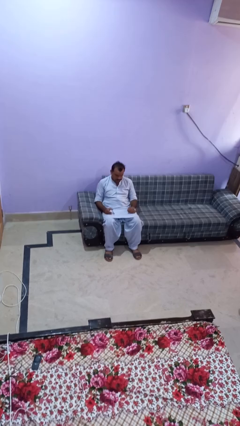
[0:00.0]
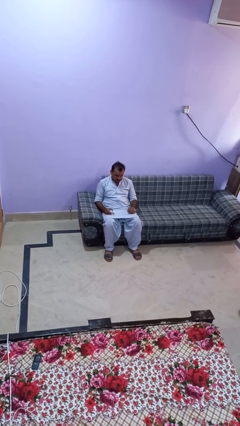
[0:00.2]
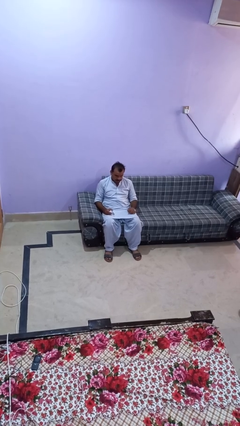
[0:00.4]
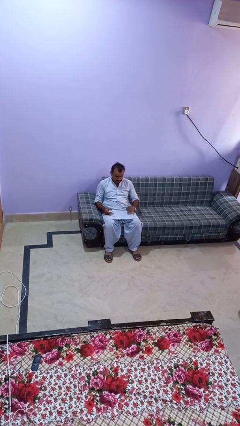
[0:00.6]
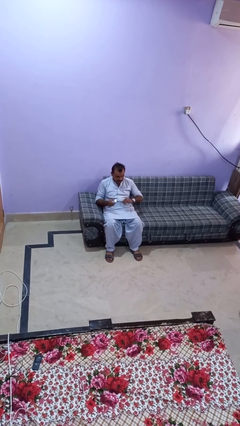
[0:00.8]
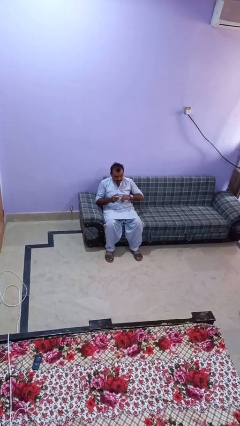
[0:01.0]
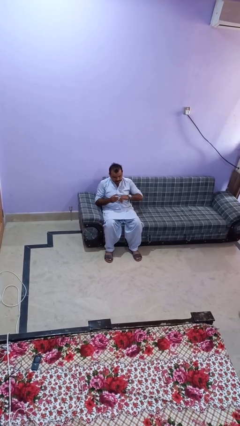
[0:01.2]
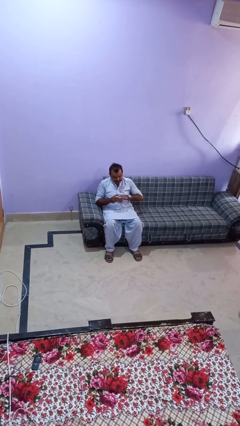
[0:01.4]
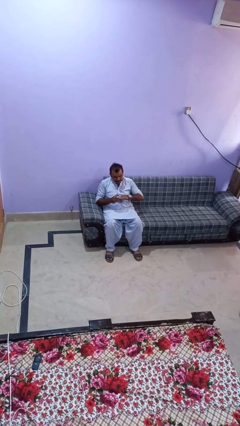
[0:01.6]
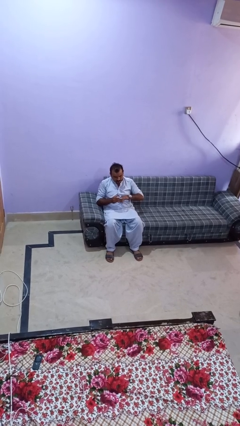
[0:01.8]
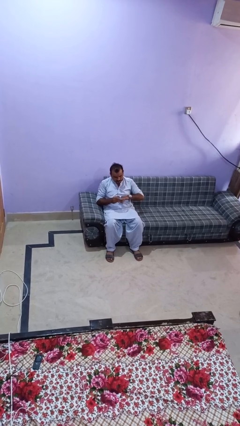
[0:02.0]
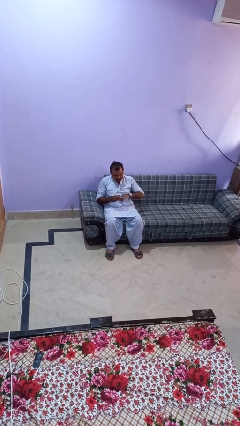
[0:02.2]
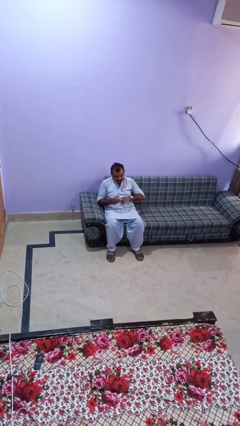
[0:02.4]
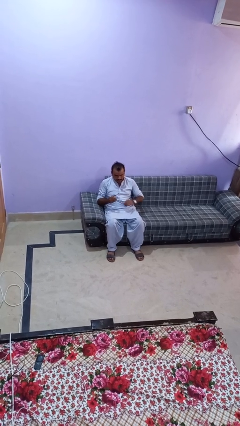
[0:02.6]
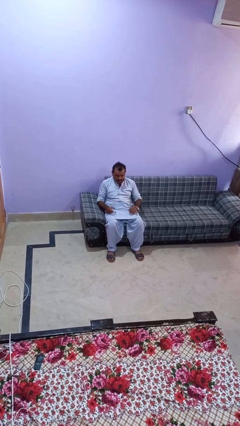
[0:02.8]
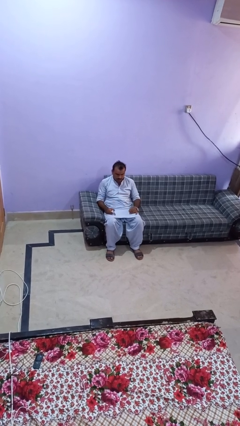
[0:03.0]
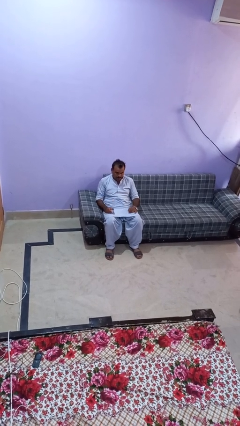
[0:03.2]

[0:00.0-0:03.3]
person clips fingernails

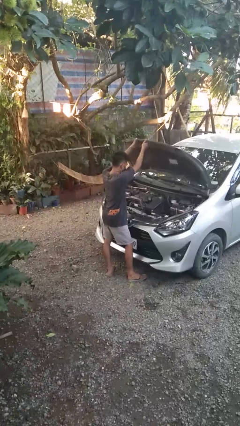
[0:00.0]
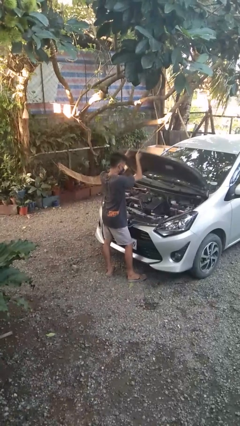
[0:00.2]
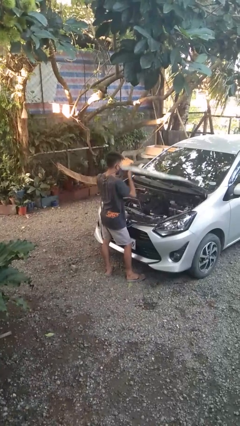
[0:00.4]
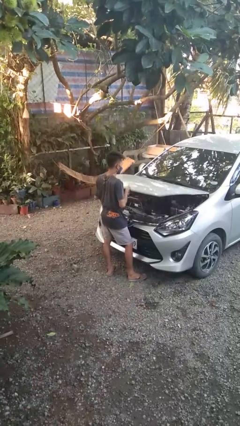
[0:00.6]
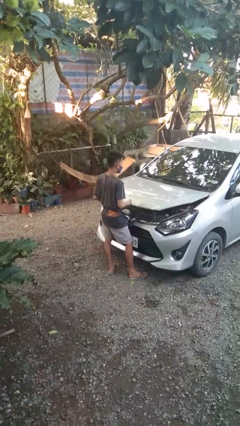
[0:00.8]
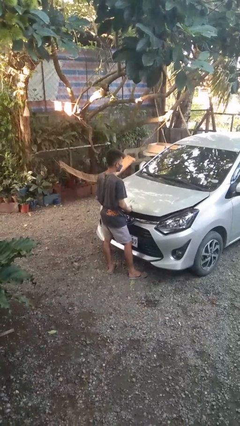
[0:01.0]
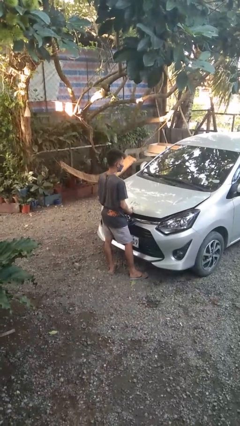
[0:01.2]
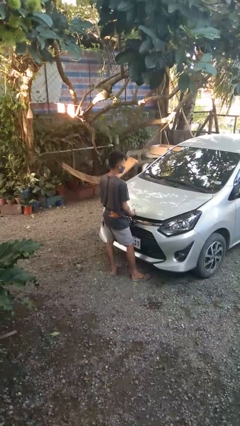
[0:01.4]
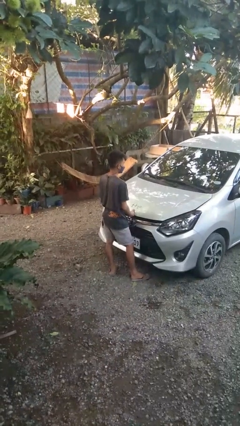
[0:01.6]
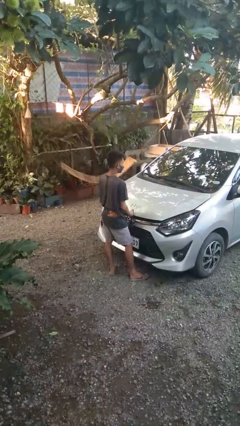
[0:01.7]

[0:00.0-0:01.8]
person closes car hood

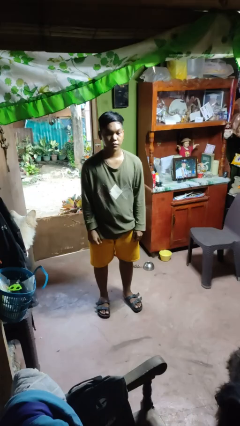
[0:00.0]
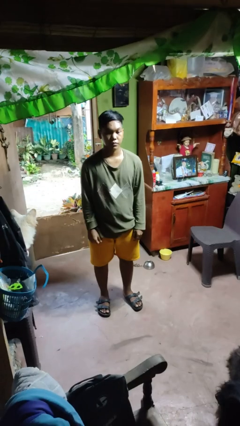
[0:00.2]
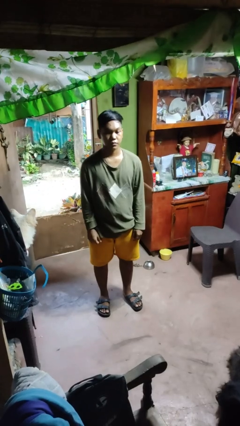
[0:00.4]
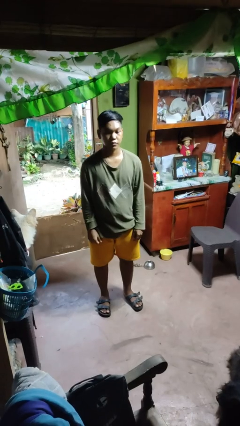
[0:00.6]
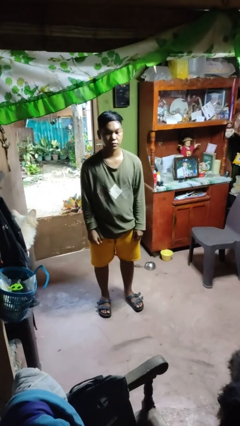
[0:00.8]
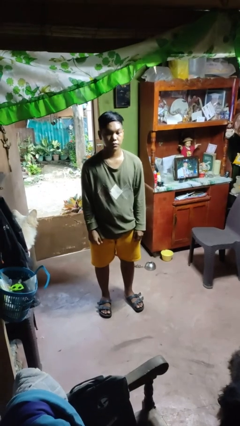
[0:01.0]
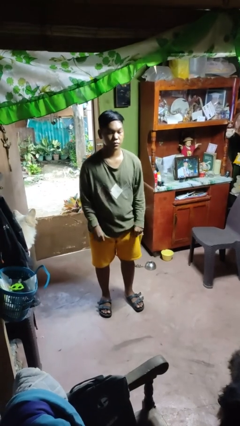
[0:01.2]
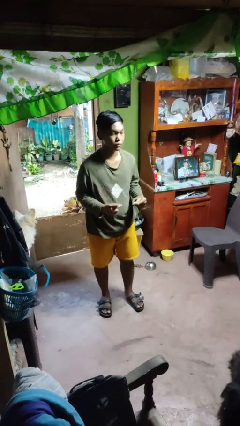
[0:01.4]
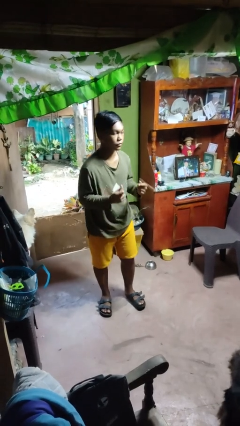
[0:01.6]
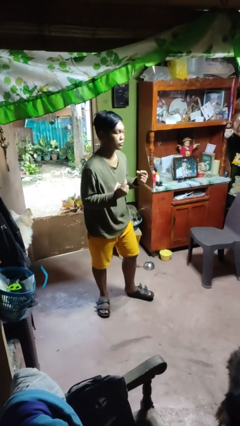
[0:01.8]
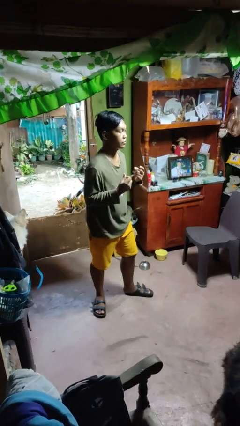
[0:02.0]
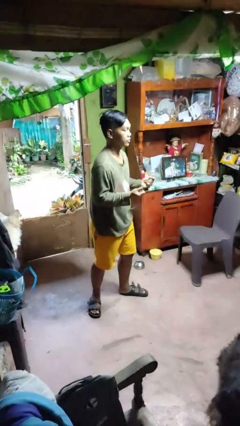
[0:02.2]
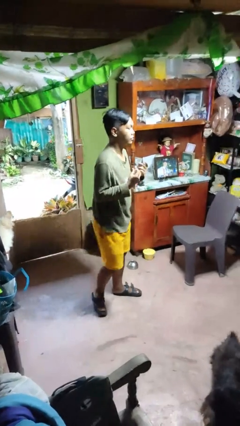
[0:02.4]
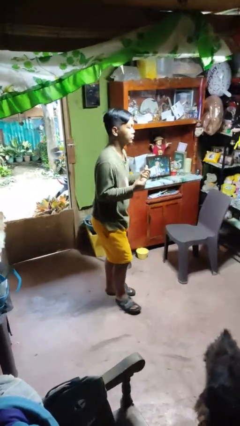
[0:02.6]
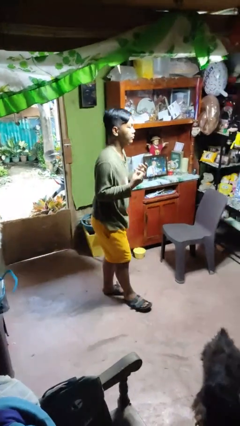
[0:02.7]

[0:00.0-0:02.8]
person snaps fingers

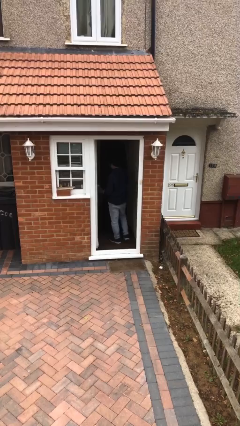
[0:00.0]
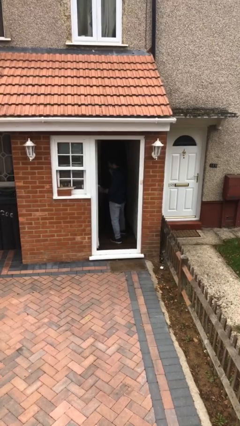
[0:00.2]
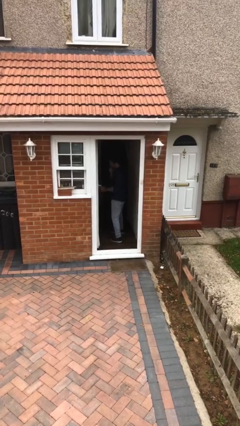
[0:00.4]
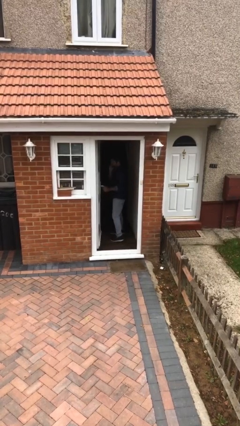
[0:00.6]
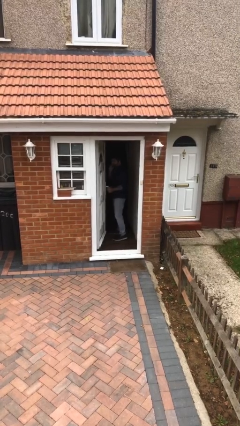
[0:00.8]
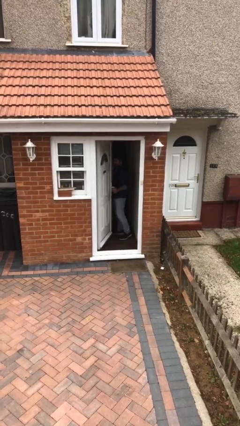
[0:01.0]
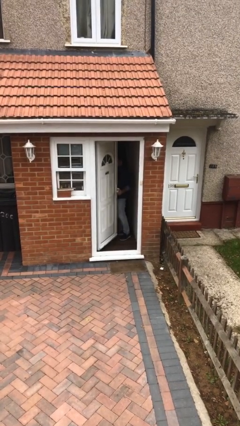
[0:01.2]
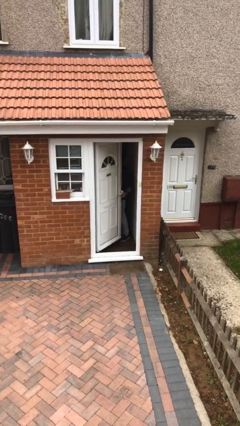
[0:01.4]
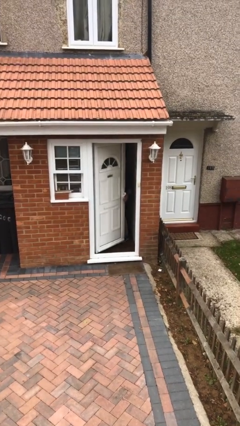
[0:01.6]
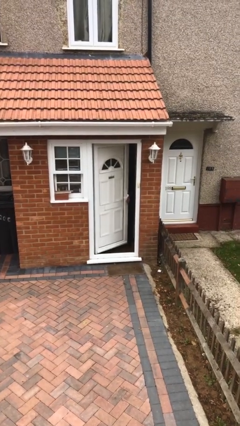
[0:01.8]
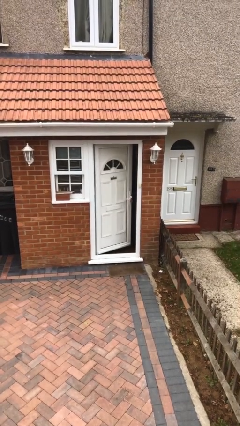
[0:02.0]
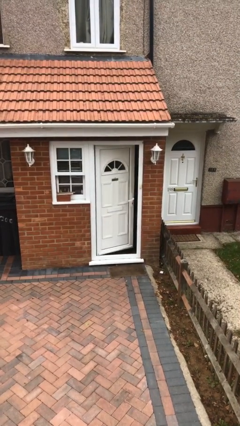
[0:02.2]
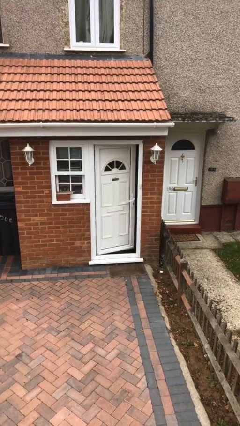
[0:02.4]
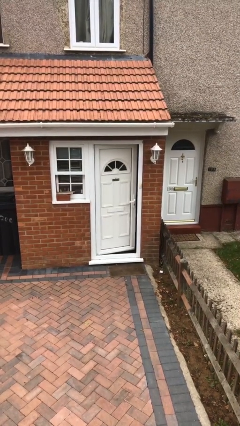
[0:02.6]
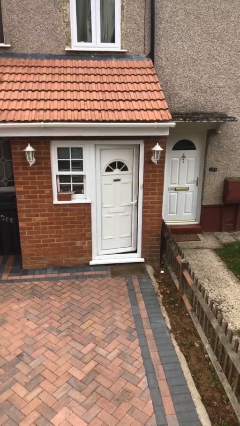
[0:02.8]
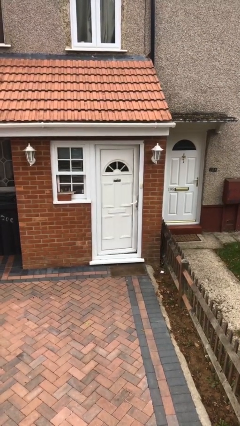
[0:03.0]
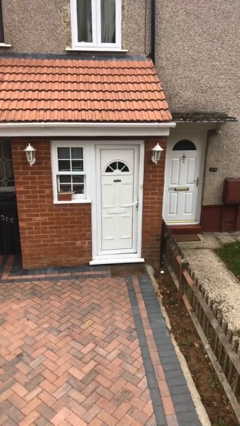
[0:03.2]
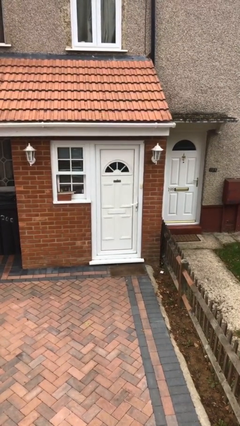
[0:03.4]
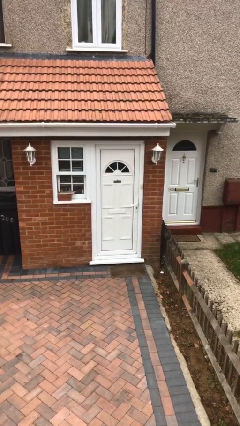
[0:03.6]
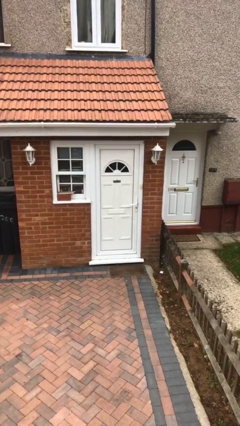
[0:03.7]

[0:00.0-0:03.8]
person closes facility door

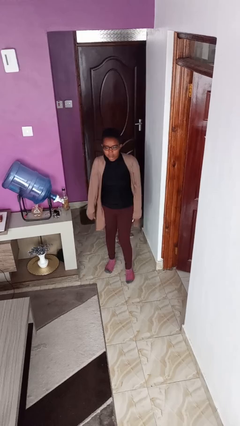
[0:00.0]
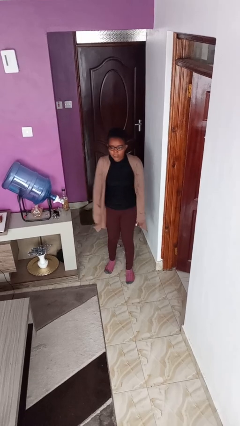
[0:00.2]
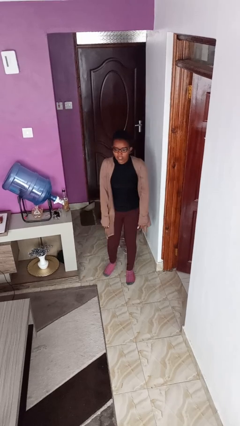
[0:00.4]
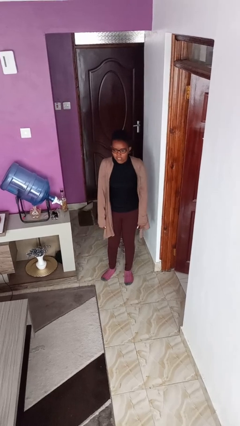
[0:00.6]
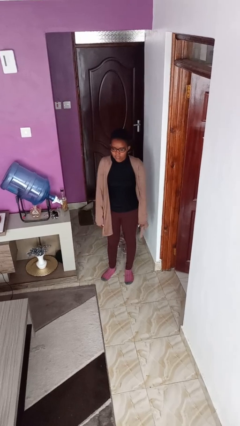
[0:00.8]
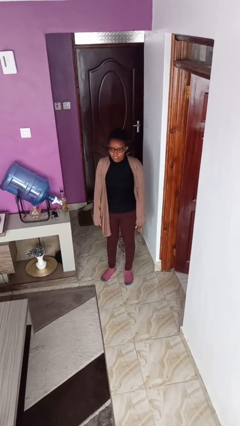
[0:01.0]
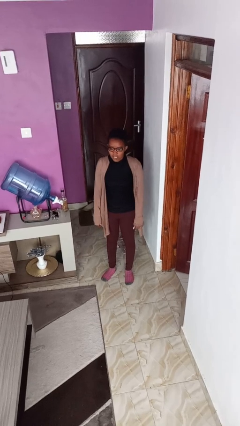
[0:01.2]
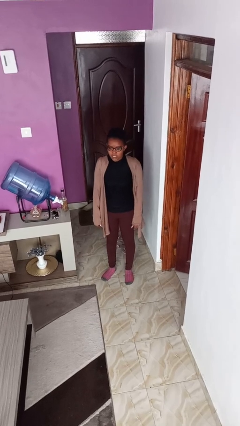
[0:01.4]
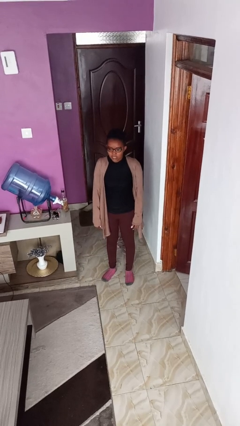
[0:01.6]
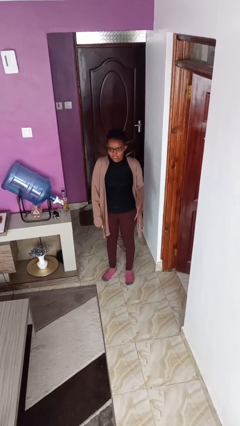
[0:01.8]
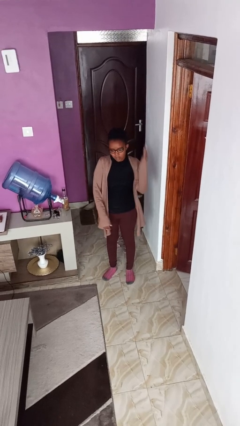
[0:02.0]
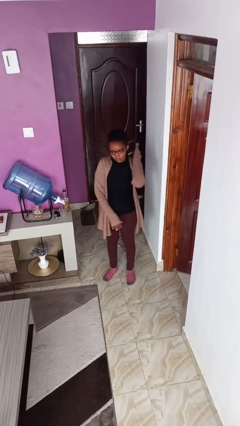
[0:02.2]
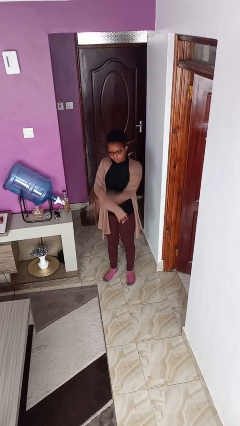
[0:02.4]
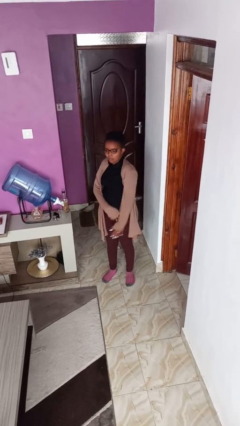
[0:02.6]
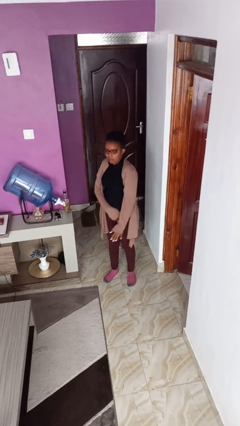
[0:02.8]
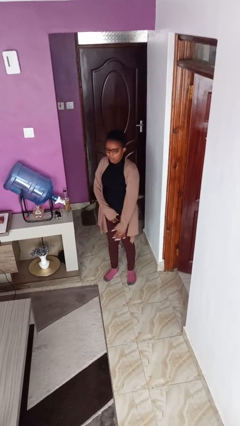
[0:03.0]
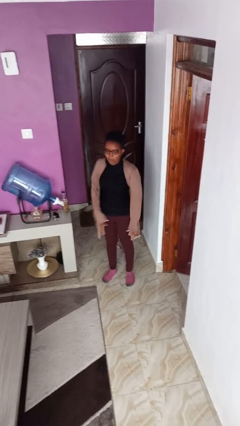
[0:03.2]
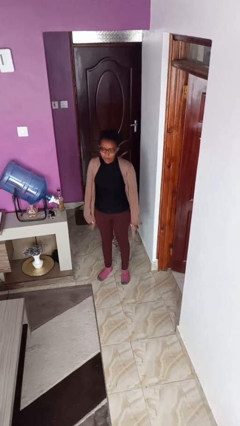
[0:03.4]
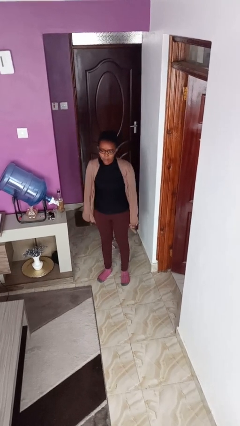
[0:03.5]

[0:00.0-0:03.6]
person karate chop

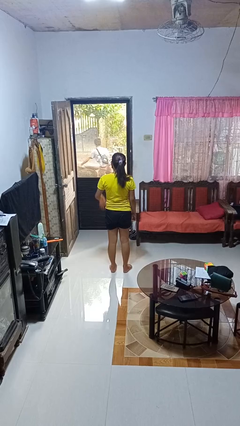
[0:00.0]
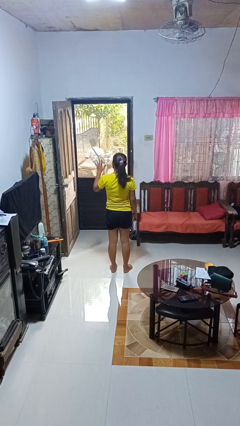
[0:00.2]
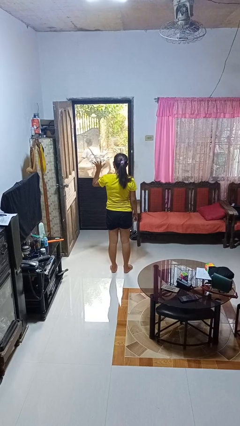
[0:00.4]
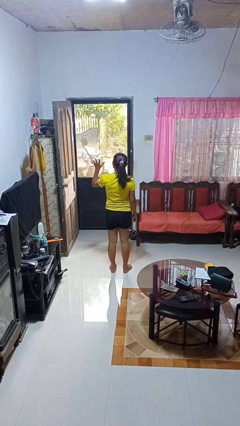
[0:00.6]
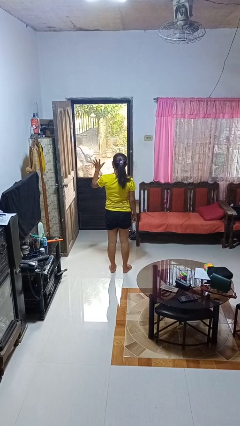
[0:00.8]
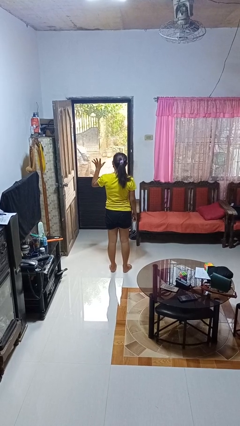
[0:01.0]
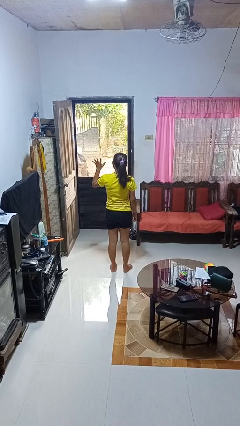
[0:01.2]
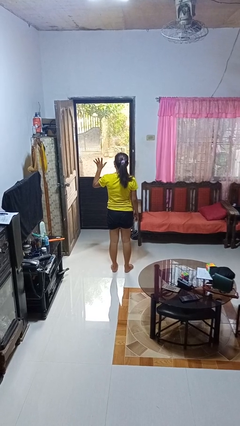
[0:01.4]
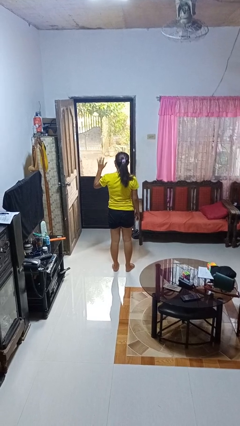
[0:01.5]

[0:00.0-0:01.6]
person gestures number five

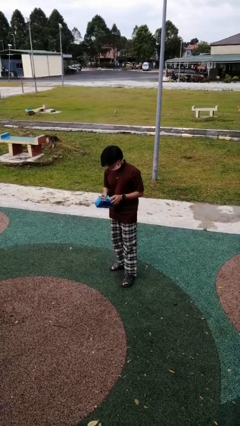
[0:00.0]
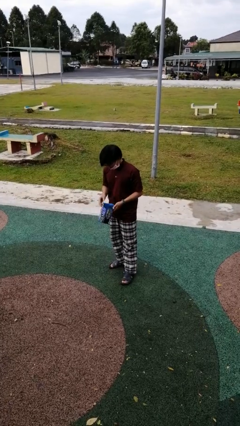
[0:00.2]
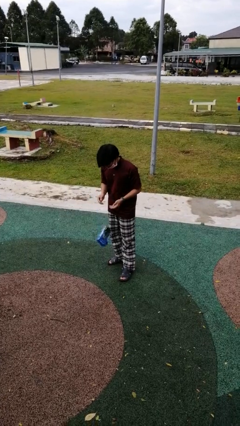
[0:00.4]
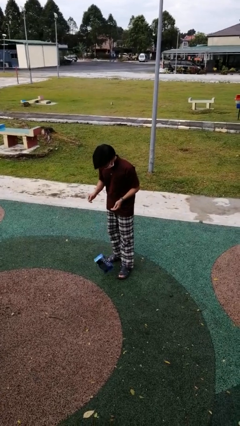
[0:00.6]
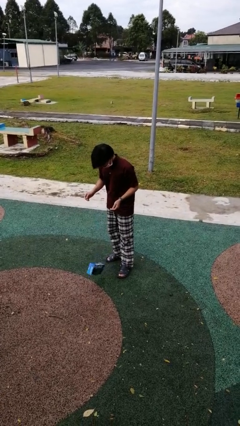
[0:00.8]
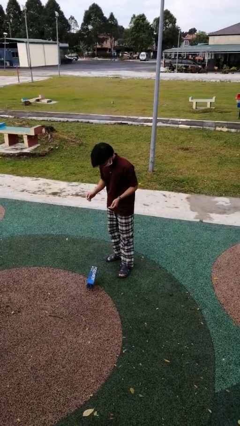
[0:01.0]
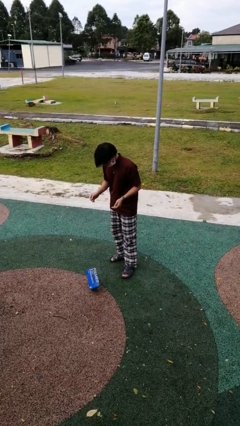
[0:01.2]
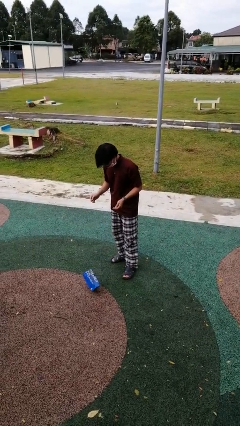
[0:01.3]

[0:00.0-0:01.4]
person drops object
